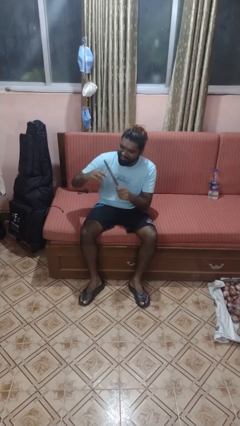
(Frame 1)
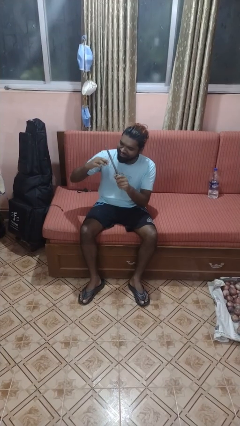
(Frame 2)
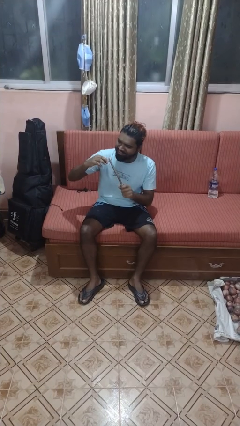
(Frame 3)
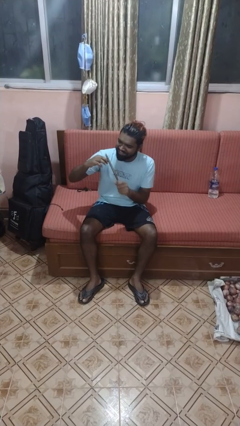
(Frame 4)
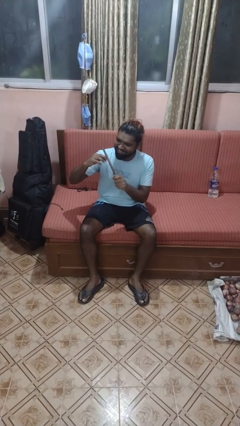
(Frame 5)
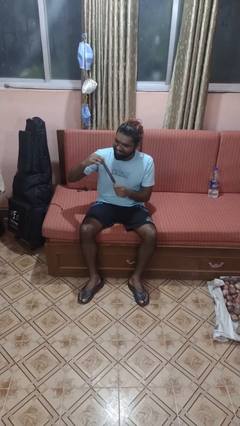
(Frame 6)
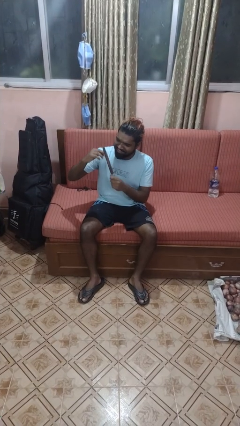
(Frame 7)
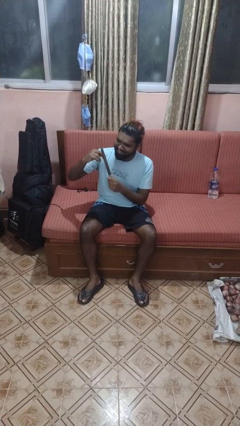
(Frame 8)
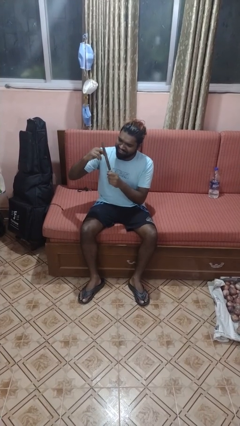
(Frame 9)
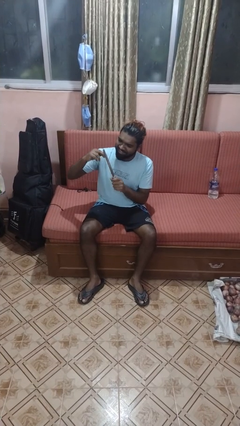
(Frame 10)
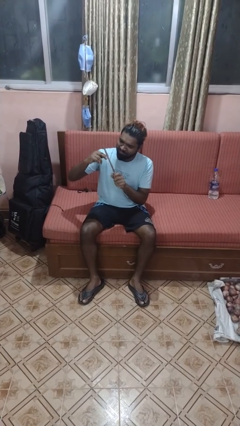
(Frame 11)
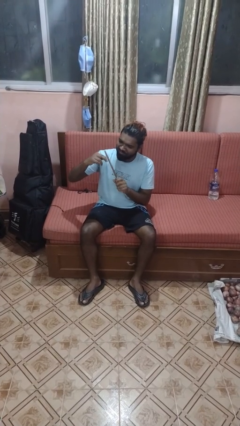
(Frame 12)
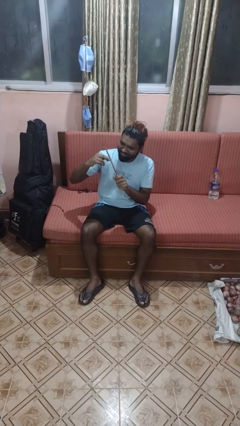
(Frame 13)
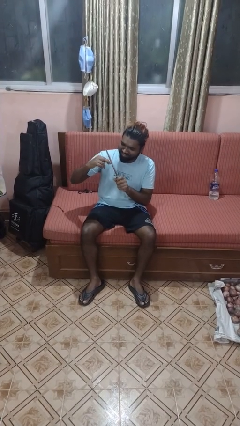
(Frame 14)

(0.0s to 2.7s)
person files fingernails

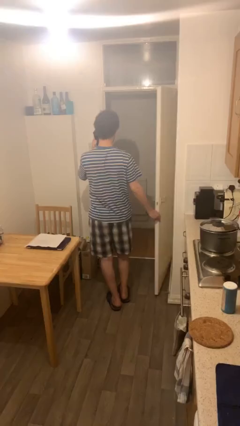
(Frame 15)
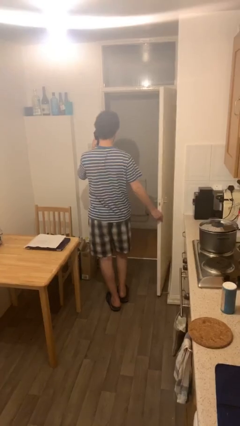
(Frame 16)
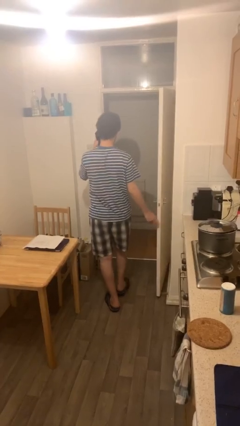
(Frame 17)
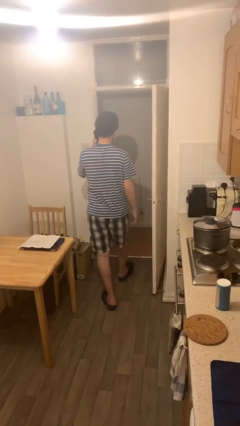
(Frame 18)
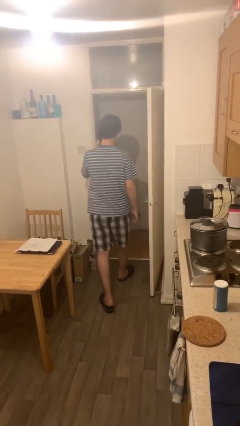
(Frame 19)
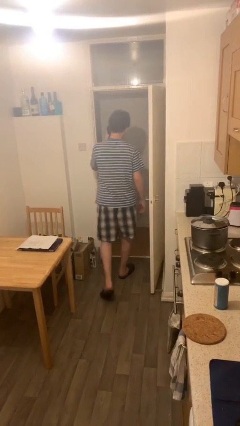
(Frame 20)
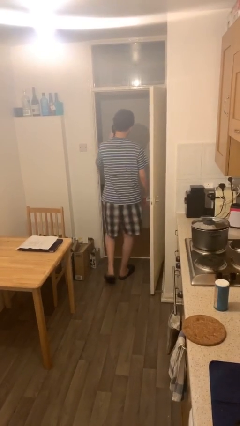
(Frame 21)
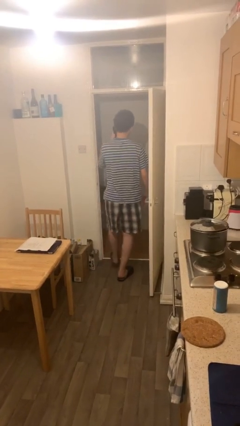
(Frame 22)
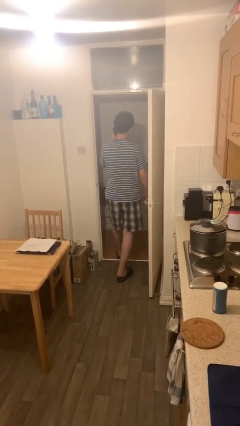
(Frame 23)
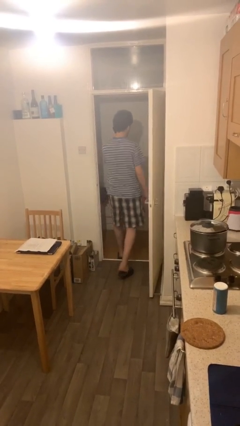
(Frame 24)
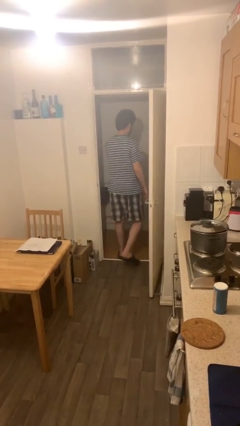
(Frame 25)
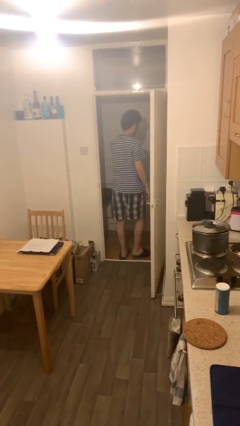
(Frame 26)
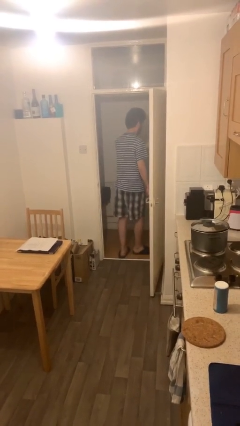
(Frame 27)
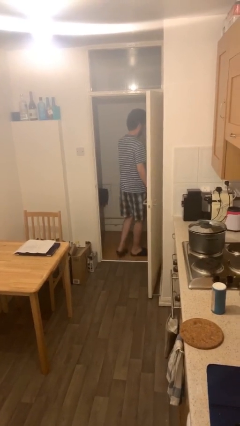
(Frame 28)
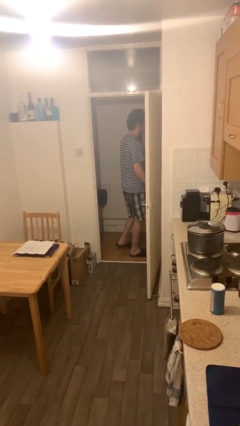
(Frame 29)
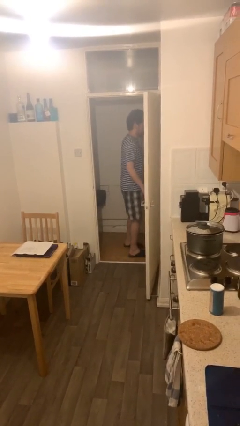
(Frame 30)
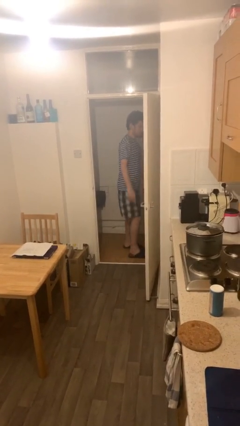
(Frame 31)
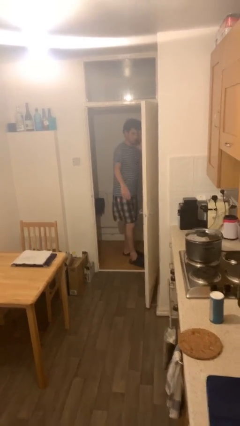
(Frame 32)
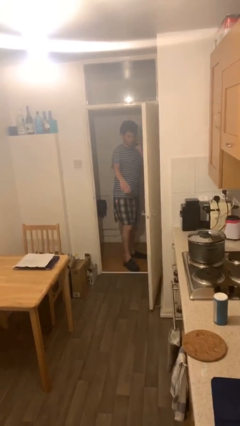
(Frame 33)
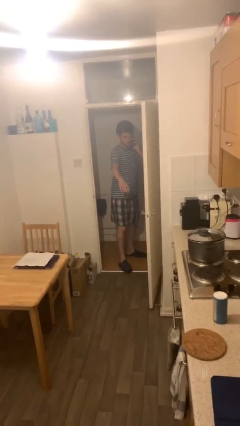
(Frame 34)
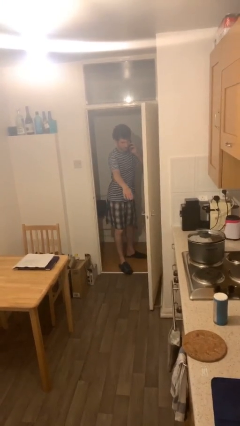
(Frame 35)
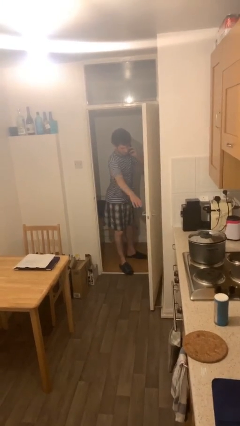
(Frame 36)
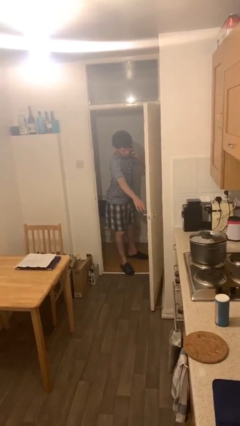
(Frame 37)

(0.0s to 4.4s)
person exits scene through structure

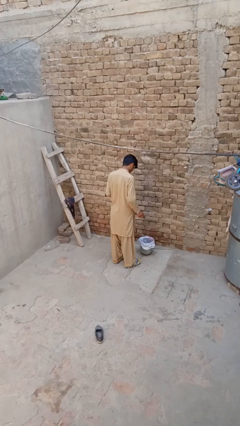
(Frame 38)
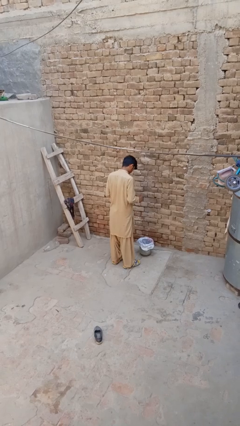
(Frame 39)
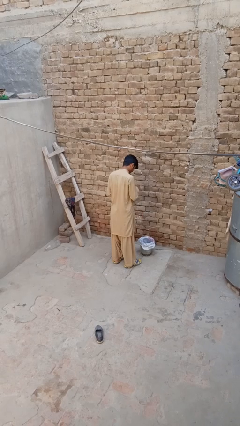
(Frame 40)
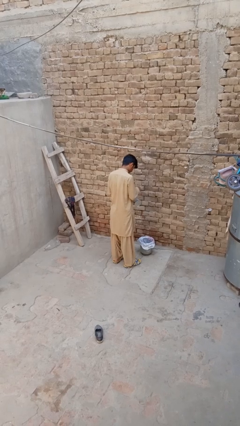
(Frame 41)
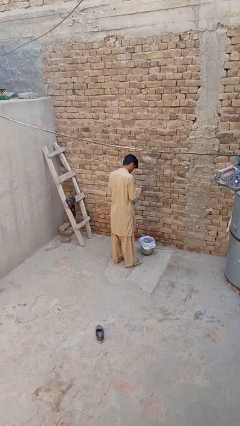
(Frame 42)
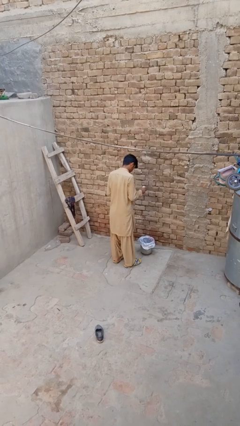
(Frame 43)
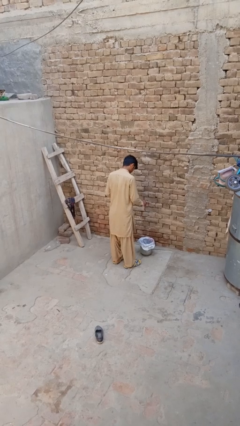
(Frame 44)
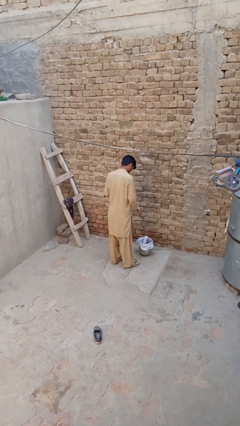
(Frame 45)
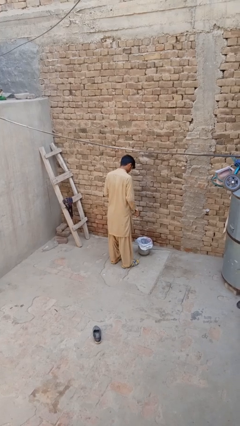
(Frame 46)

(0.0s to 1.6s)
person discards trash

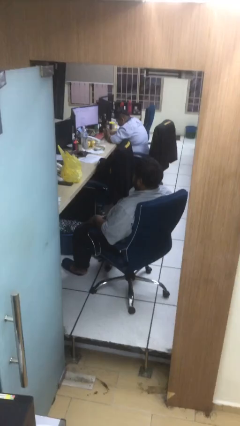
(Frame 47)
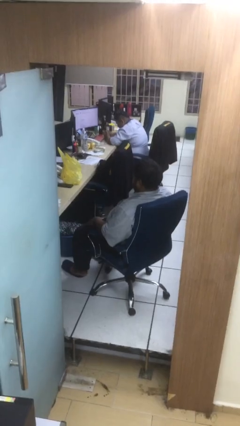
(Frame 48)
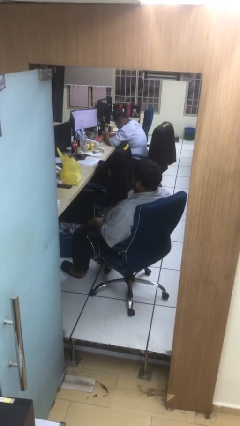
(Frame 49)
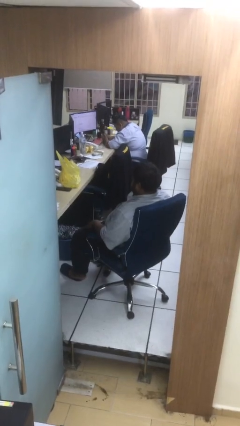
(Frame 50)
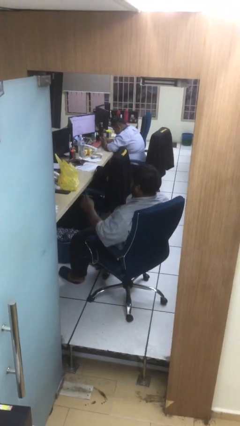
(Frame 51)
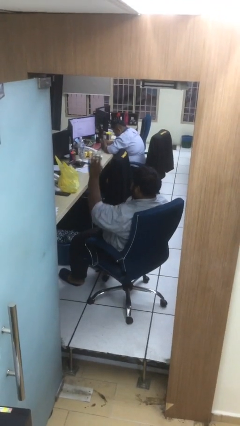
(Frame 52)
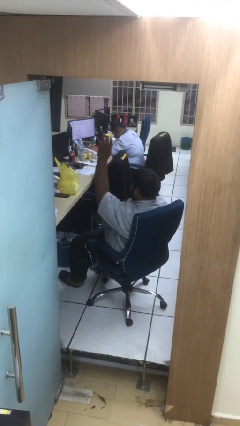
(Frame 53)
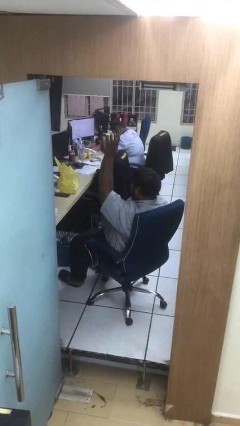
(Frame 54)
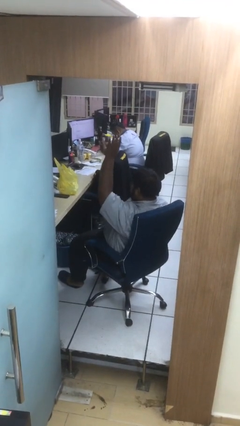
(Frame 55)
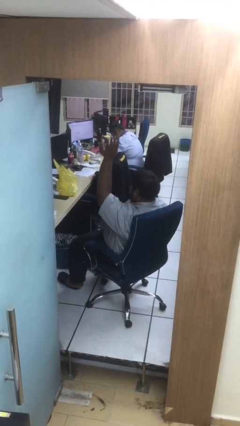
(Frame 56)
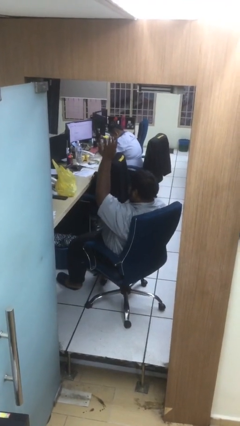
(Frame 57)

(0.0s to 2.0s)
person gestures raise hand

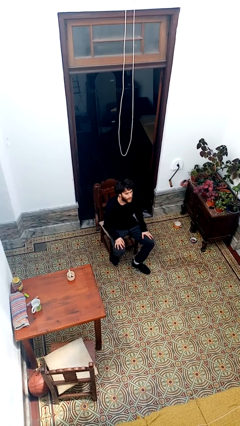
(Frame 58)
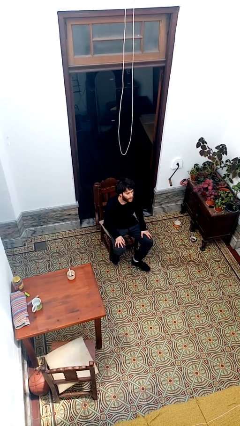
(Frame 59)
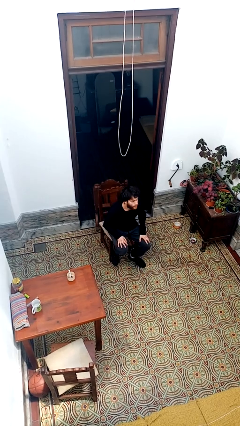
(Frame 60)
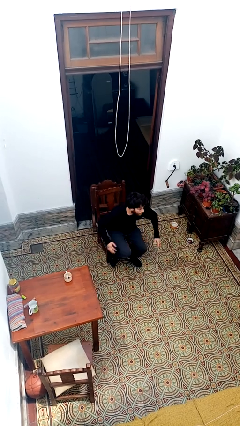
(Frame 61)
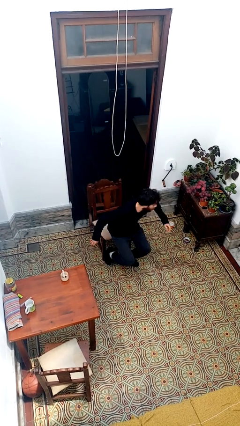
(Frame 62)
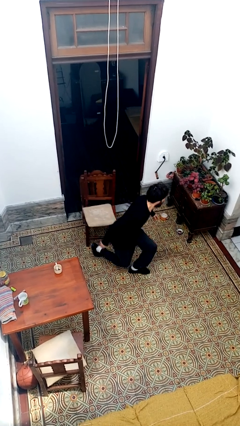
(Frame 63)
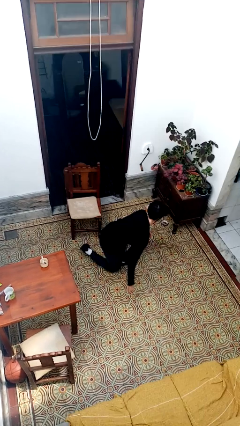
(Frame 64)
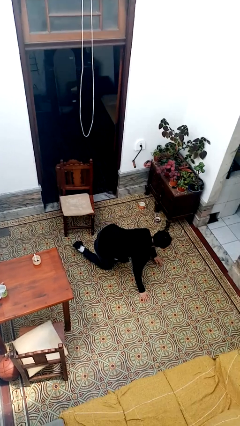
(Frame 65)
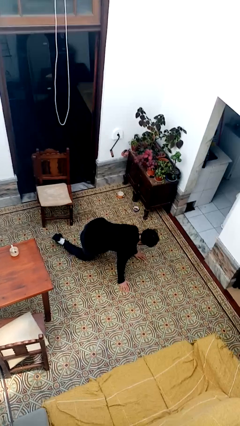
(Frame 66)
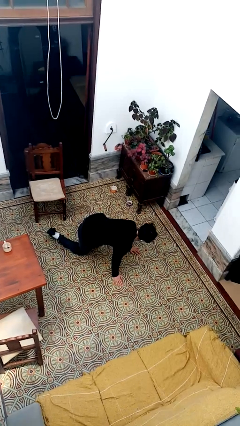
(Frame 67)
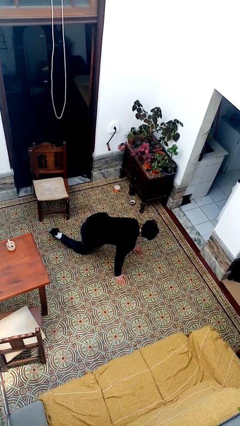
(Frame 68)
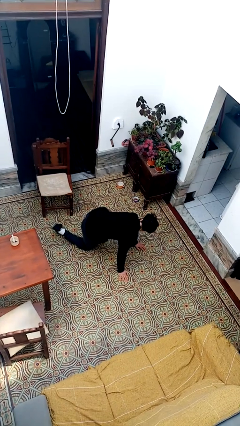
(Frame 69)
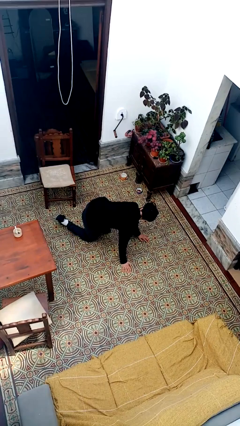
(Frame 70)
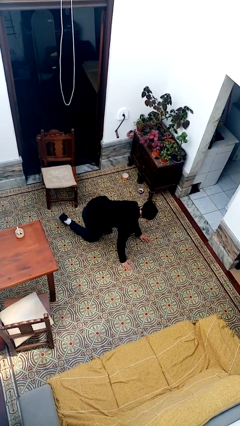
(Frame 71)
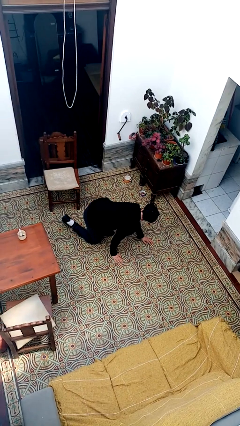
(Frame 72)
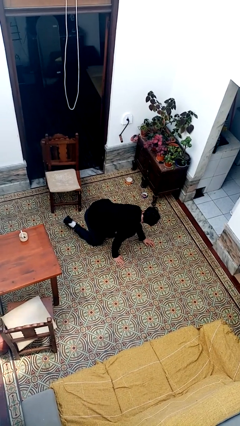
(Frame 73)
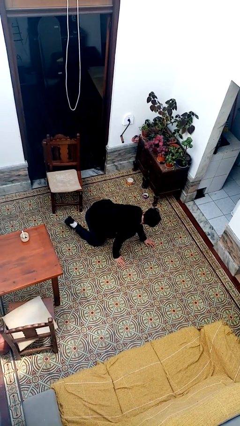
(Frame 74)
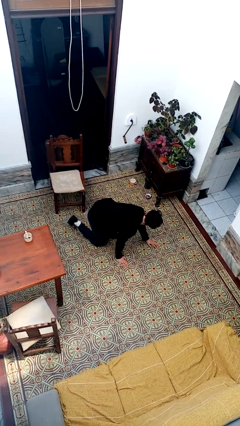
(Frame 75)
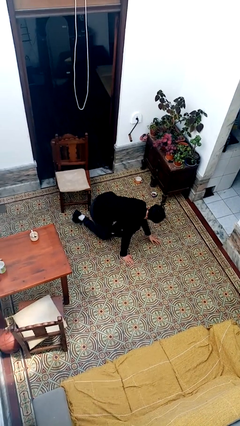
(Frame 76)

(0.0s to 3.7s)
person falls from chair

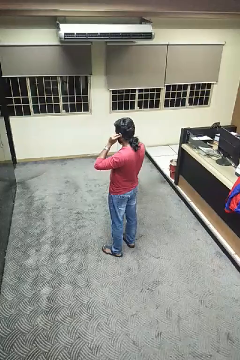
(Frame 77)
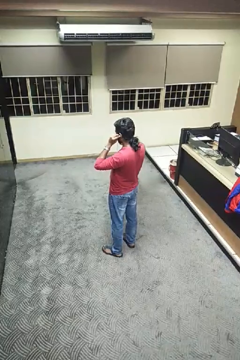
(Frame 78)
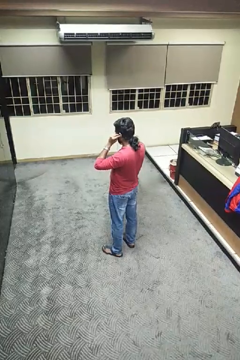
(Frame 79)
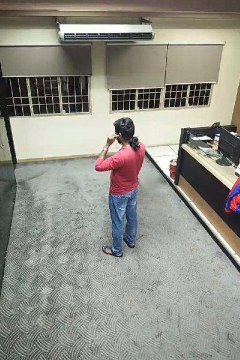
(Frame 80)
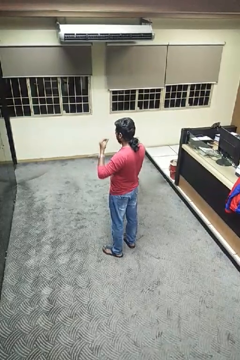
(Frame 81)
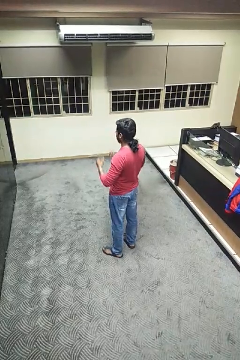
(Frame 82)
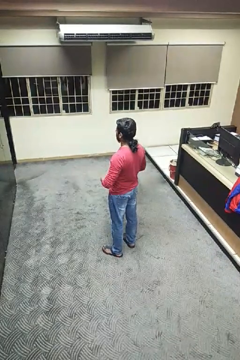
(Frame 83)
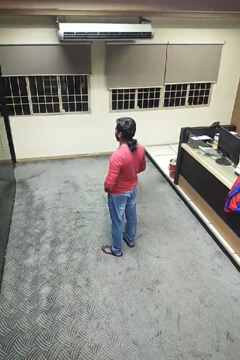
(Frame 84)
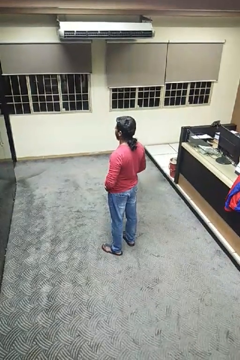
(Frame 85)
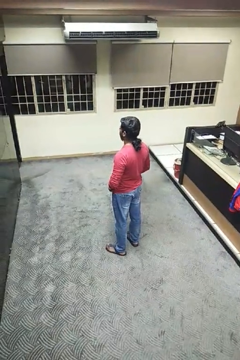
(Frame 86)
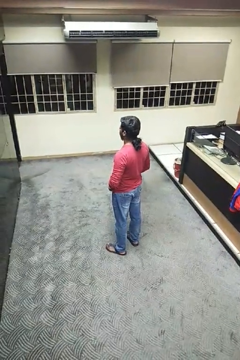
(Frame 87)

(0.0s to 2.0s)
person takes off headphones

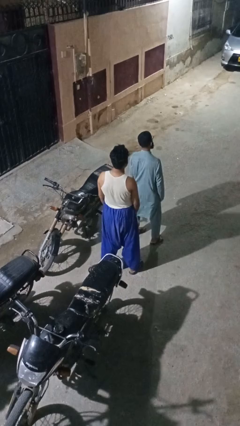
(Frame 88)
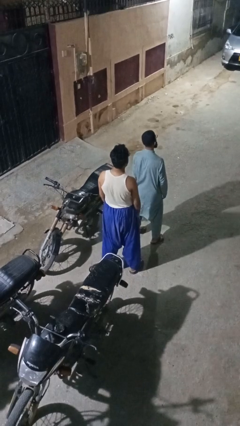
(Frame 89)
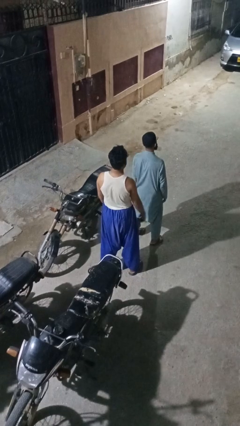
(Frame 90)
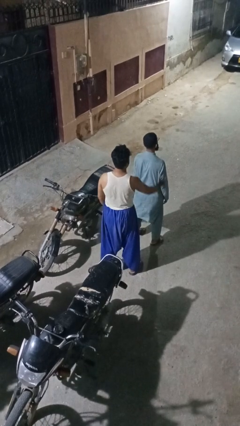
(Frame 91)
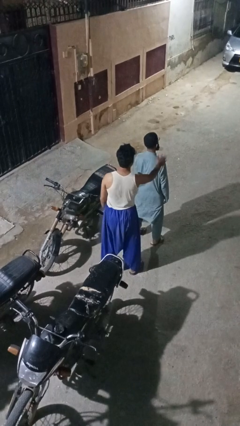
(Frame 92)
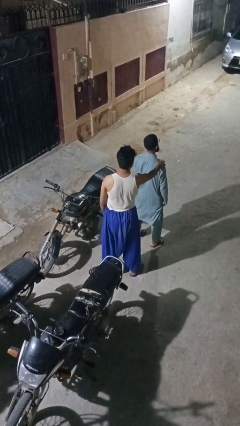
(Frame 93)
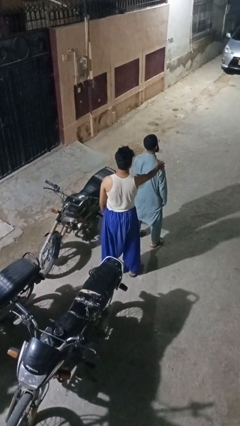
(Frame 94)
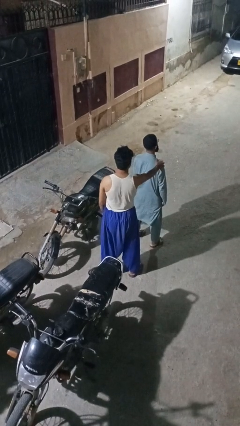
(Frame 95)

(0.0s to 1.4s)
person grabs person by shoulder
